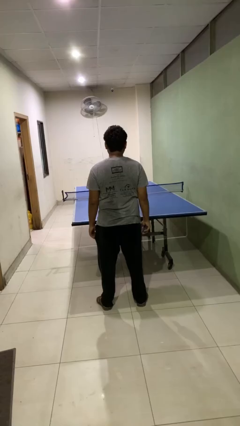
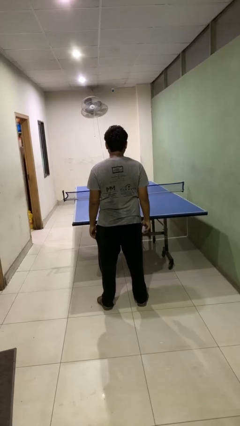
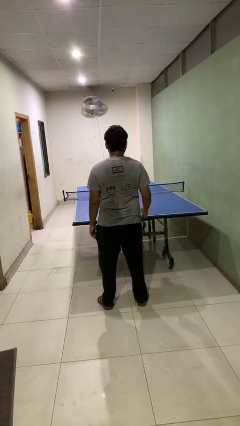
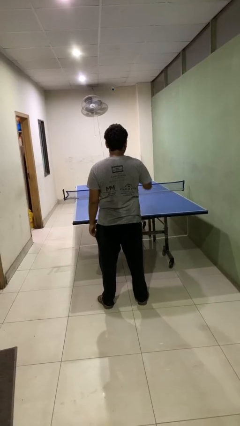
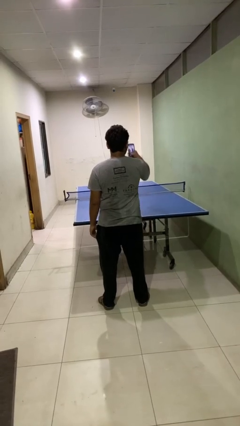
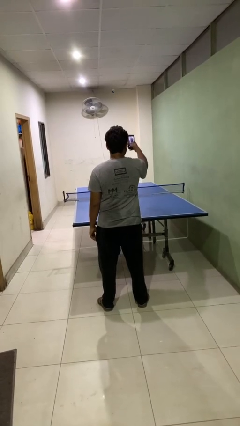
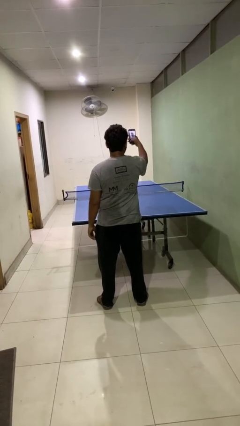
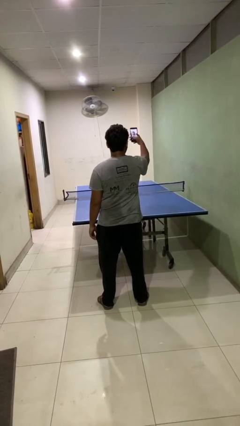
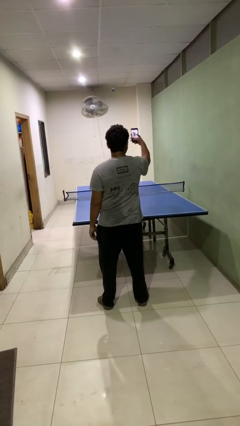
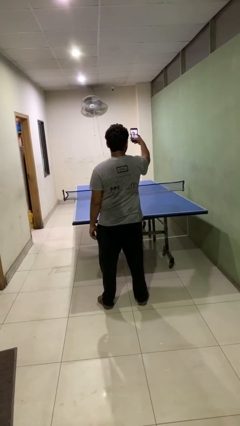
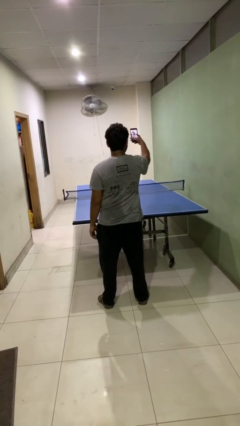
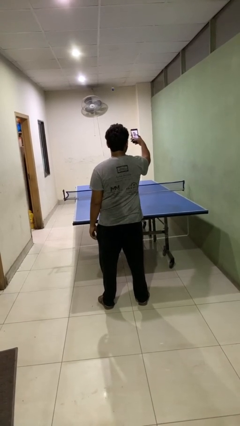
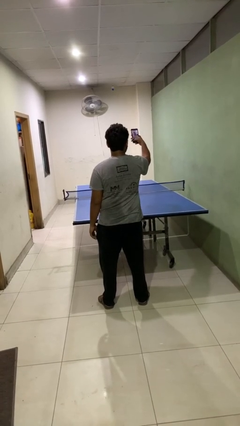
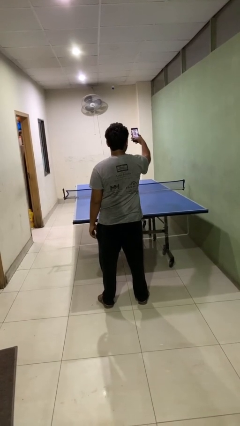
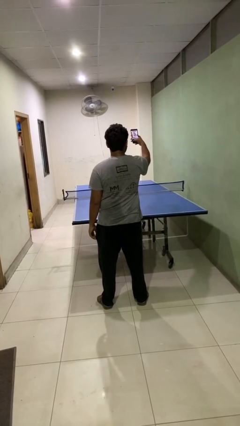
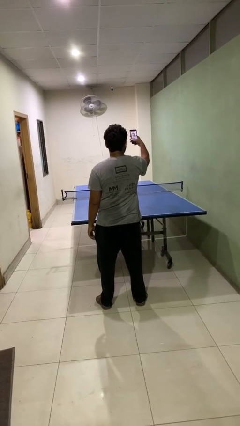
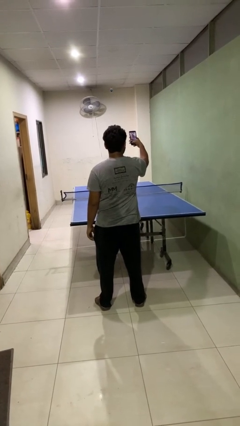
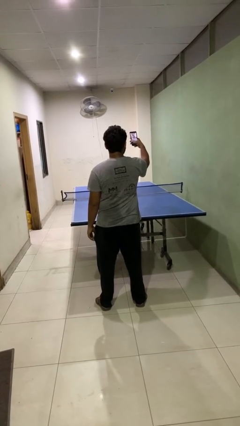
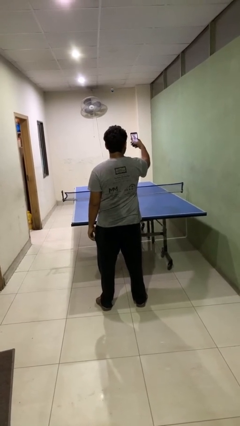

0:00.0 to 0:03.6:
person takes selfie

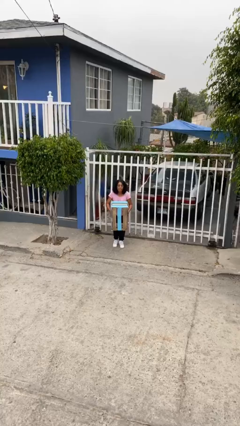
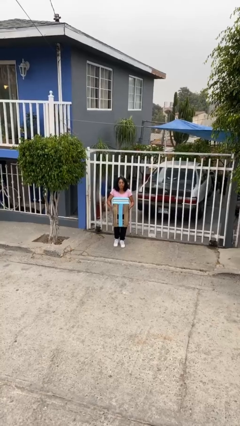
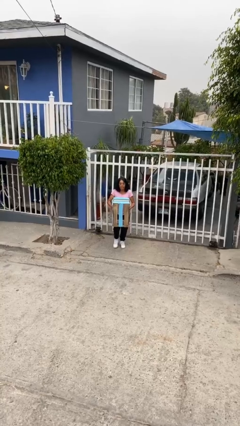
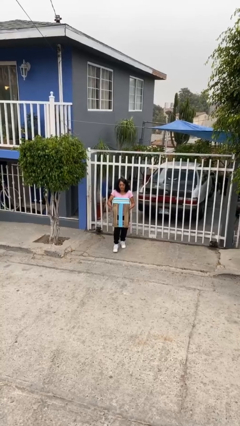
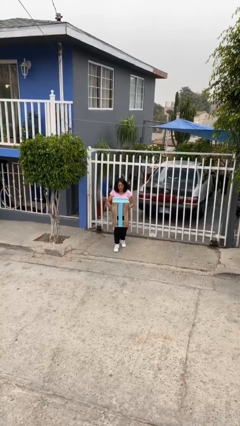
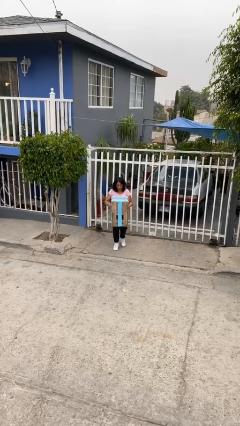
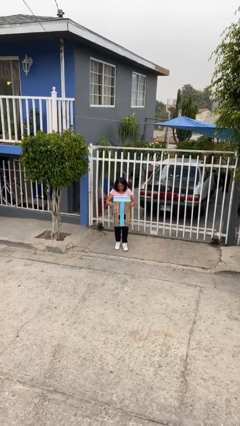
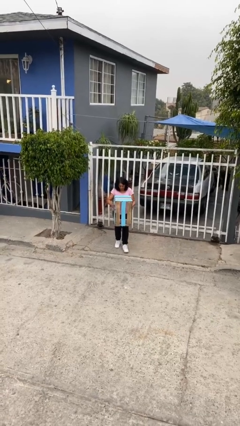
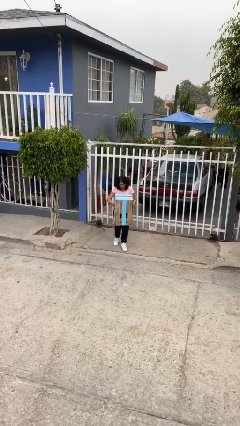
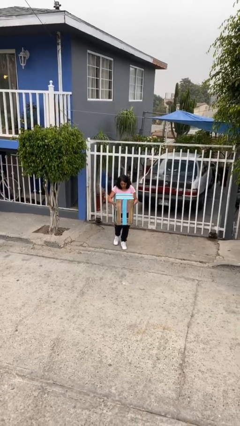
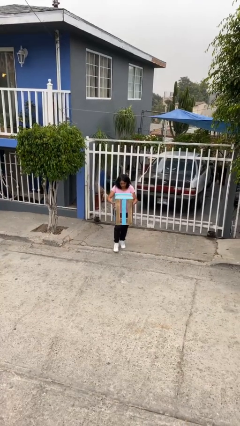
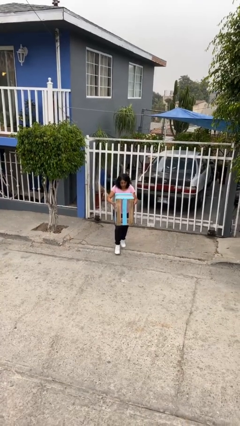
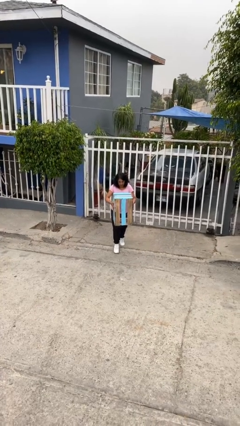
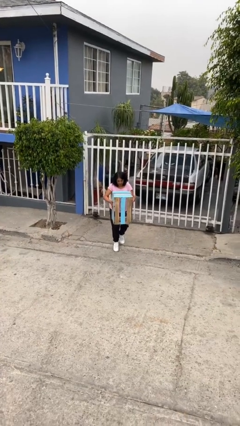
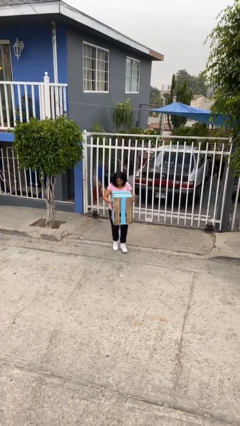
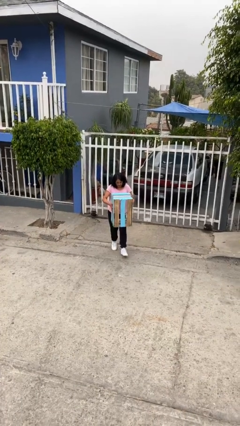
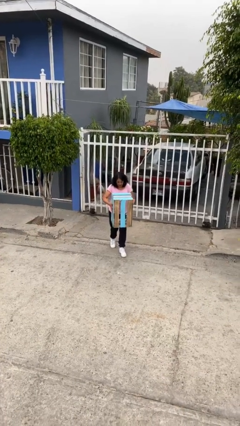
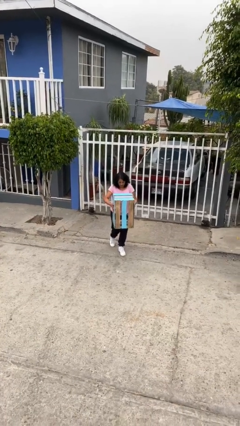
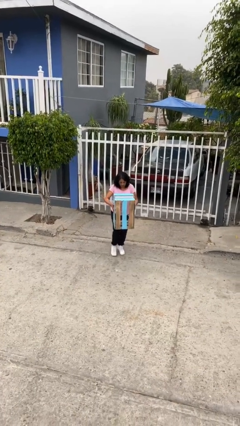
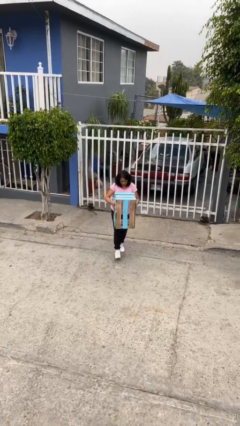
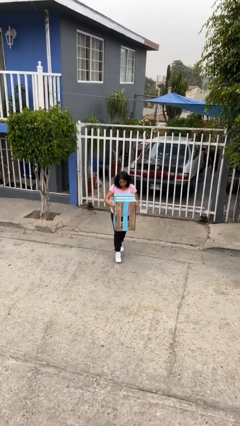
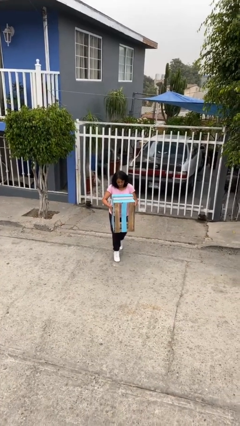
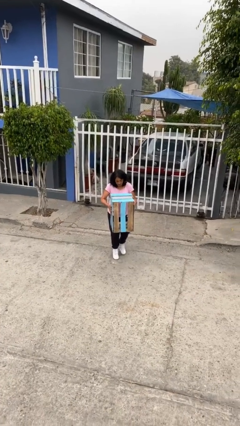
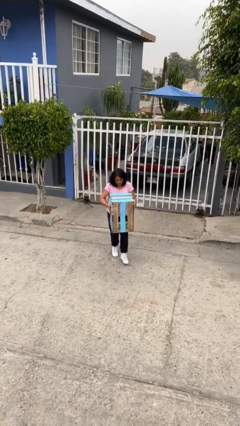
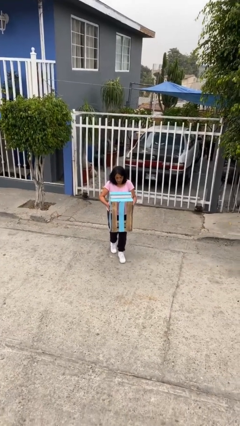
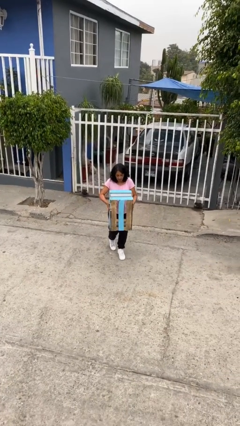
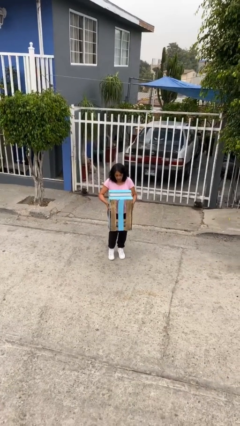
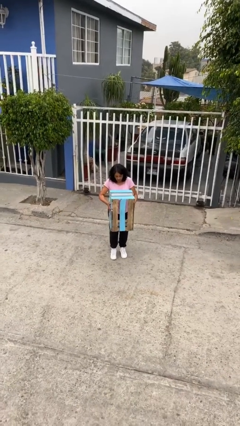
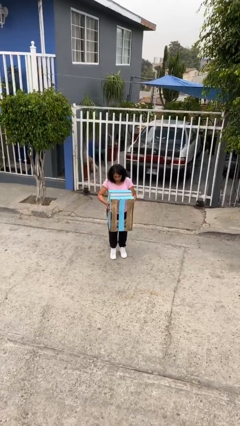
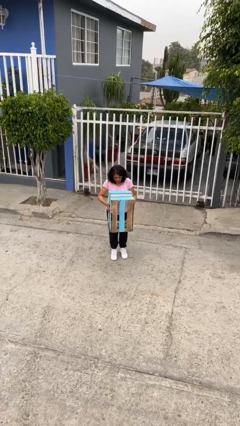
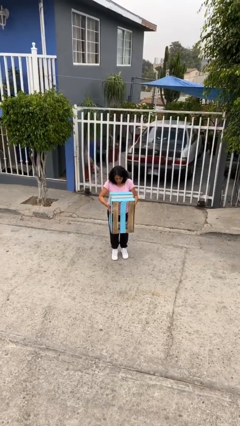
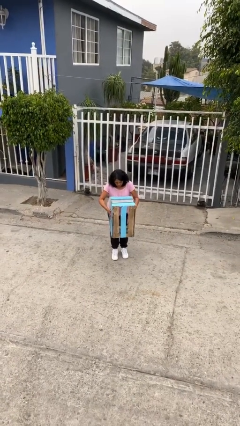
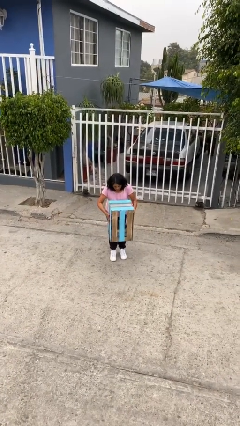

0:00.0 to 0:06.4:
person carries heavy object

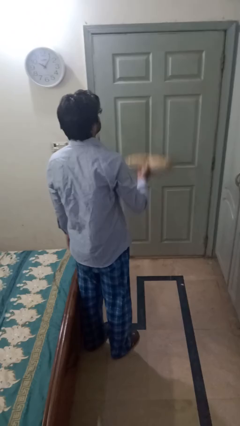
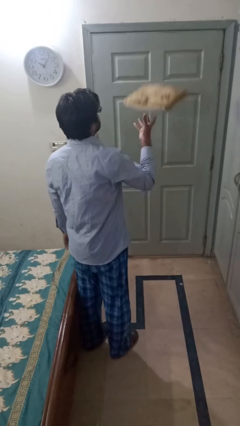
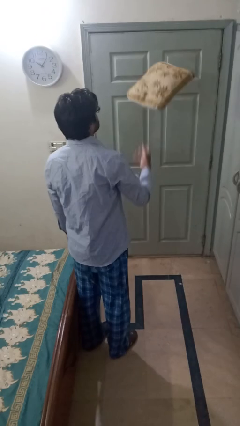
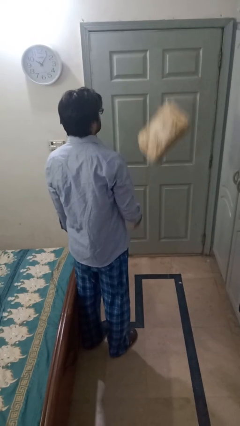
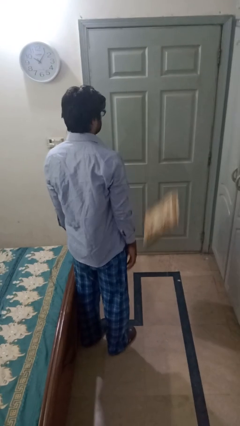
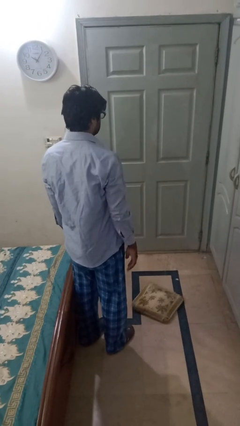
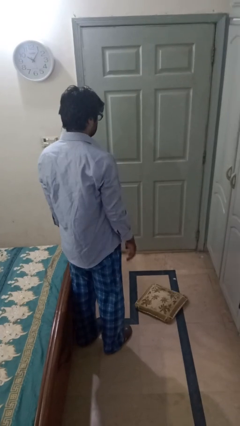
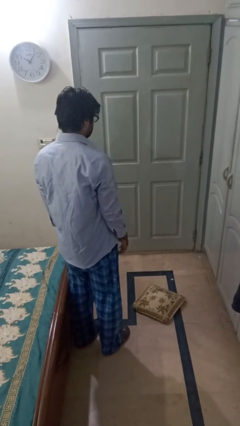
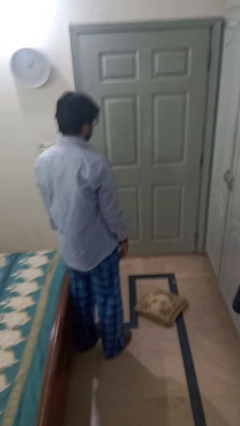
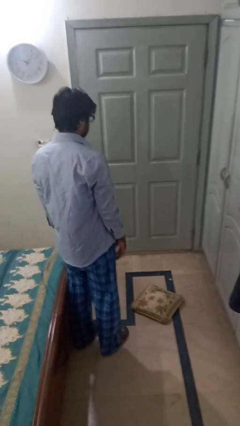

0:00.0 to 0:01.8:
person throws object into air

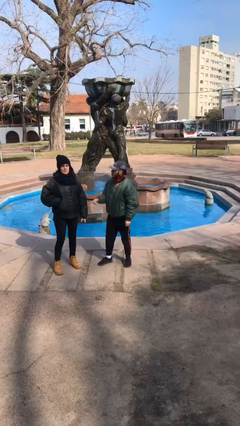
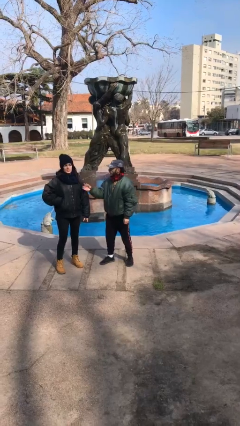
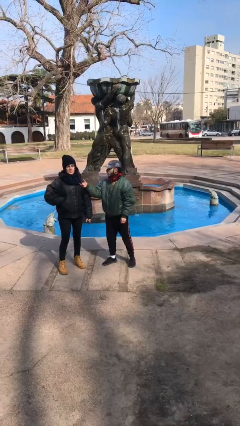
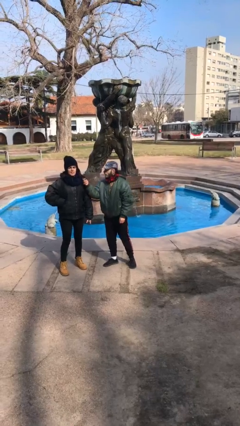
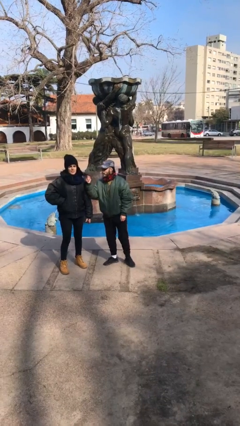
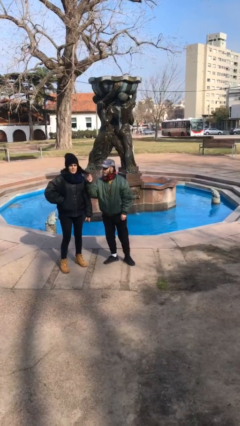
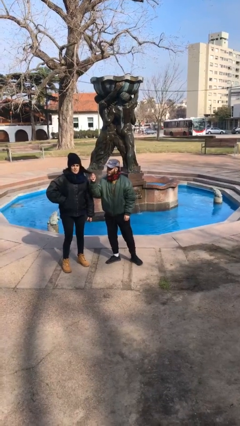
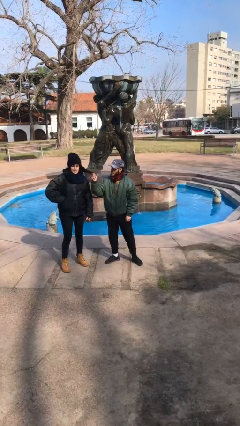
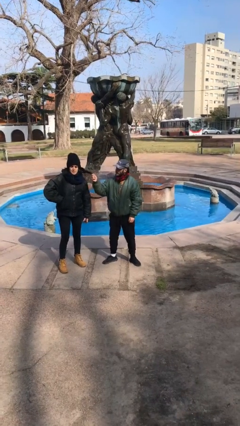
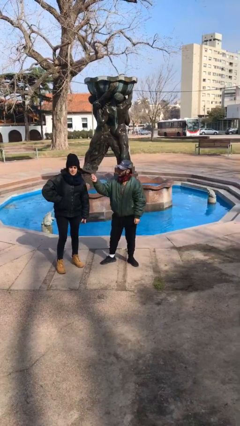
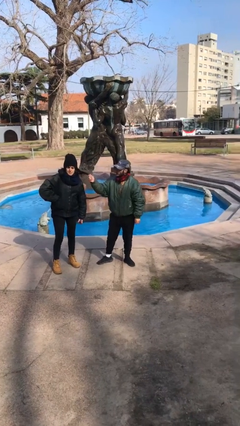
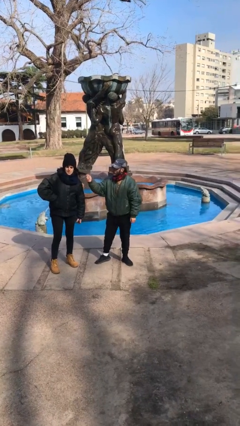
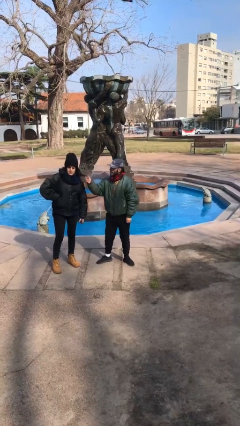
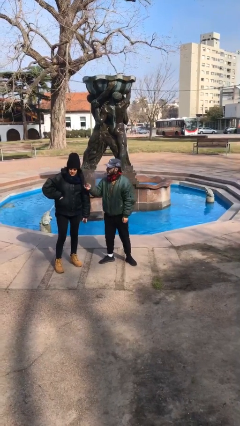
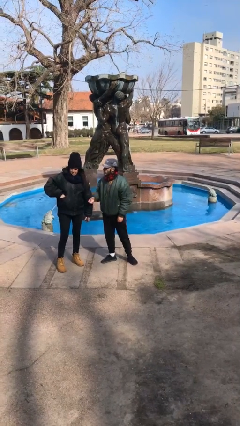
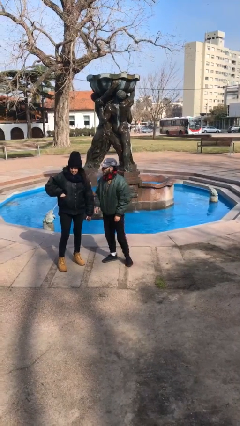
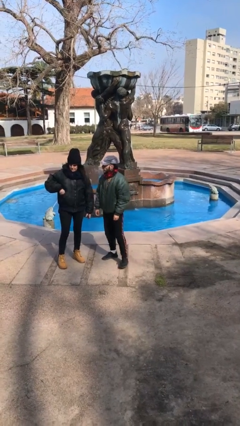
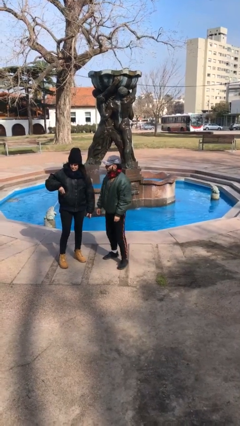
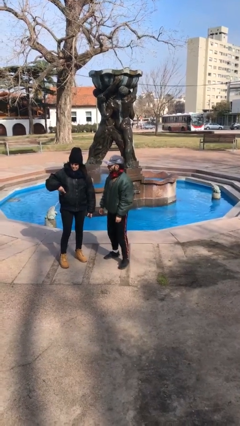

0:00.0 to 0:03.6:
person grabs person by hair

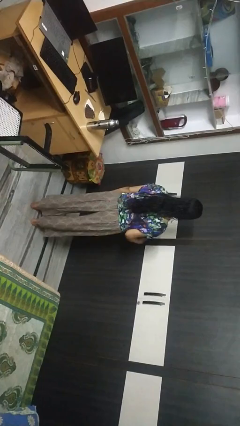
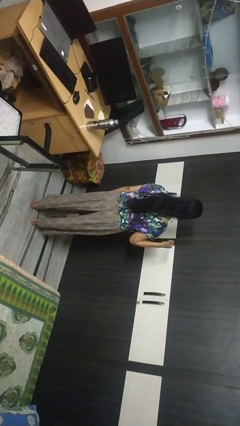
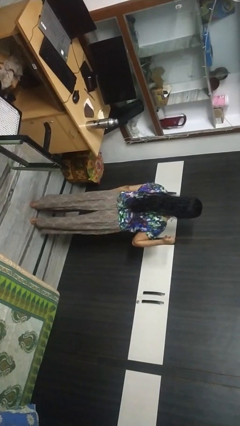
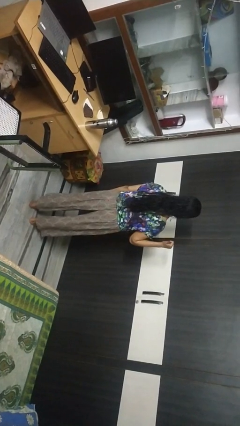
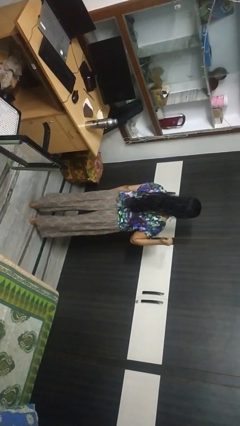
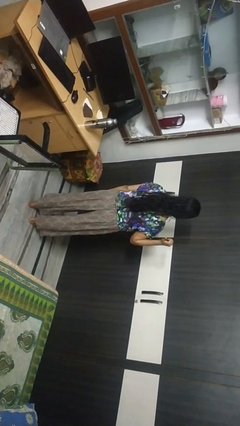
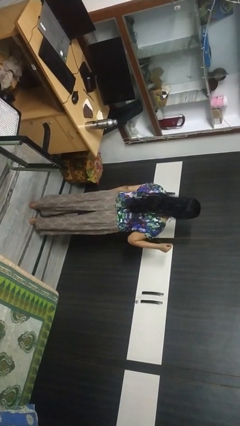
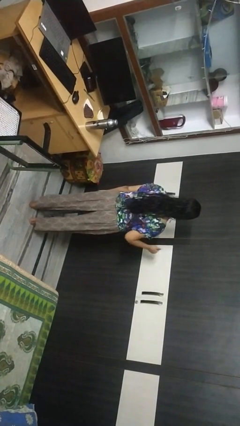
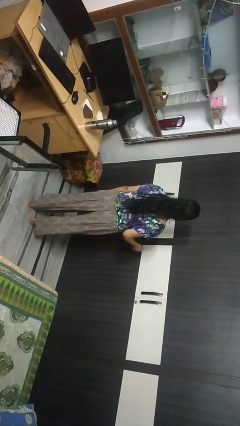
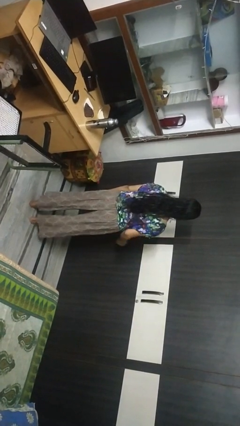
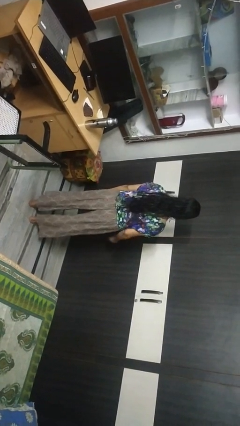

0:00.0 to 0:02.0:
person gestures behind me
